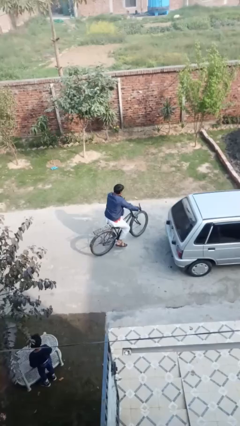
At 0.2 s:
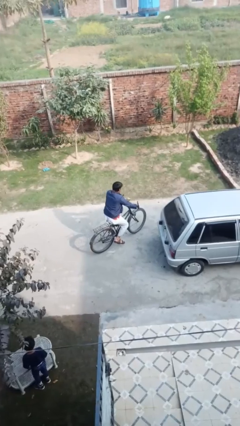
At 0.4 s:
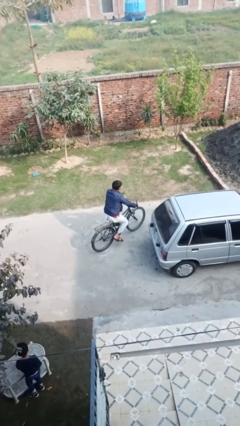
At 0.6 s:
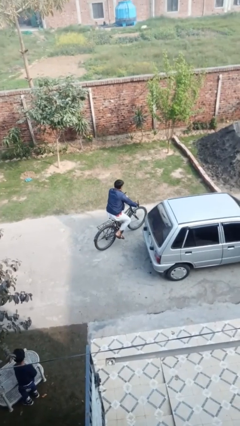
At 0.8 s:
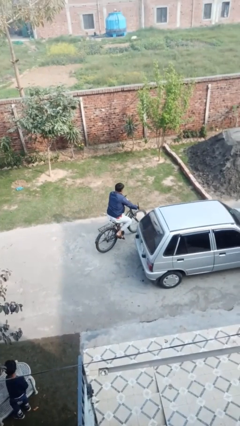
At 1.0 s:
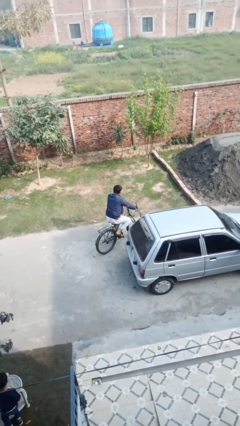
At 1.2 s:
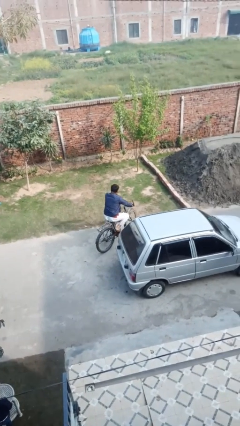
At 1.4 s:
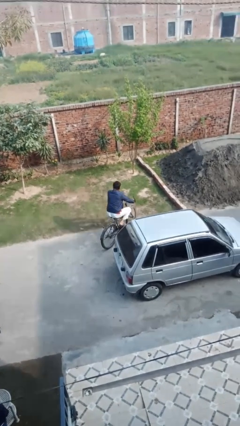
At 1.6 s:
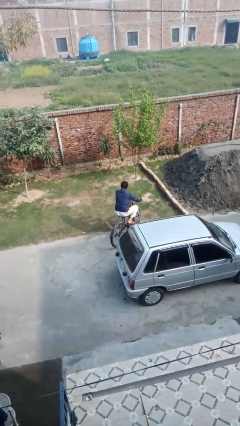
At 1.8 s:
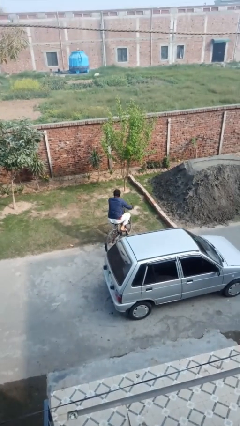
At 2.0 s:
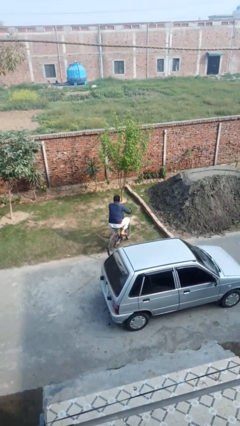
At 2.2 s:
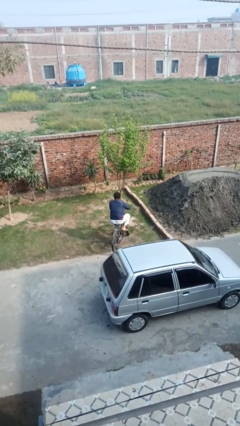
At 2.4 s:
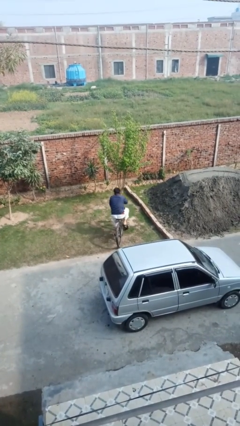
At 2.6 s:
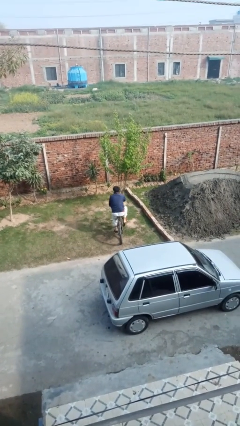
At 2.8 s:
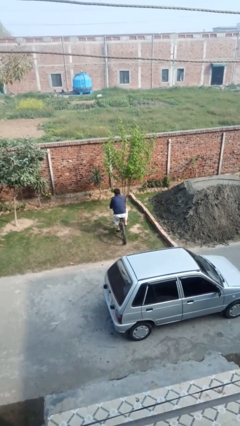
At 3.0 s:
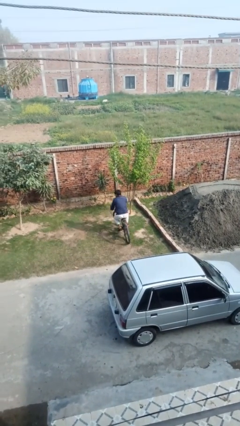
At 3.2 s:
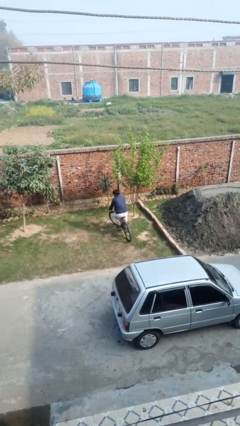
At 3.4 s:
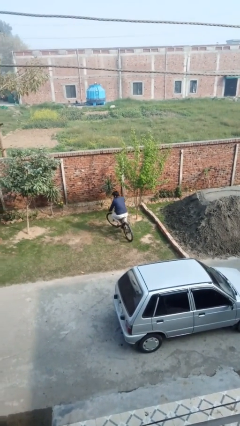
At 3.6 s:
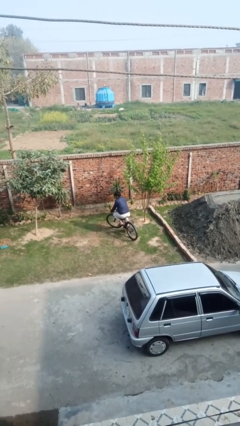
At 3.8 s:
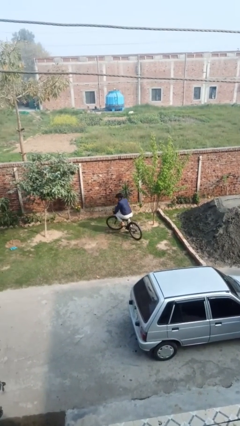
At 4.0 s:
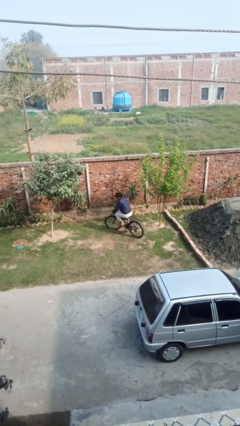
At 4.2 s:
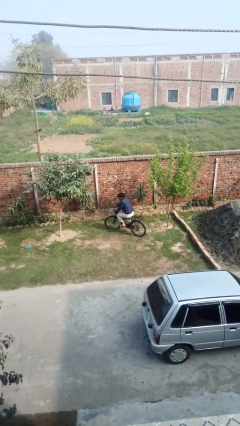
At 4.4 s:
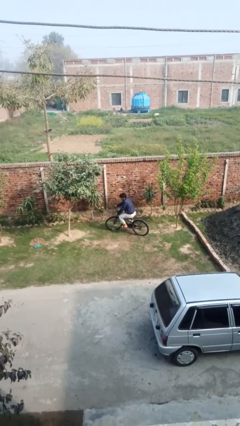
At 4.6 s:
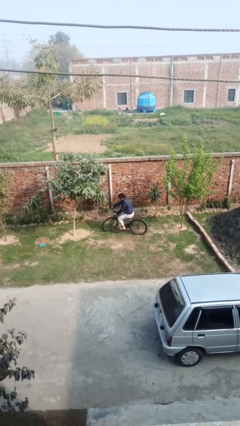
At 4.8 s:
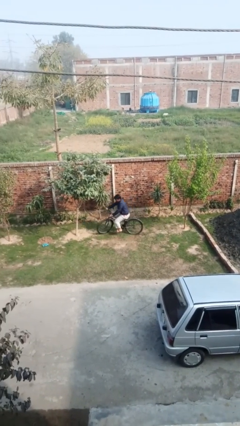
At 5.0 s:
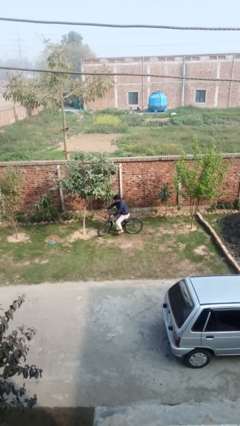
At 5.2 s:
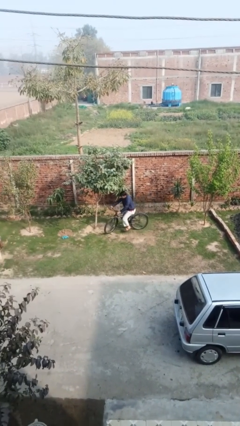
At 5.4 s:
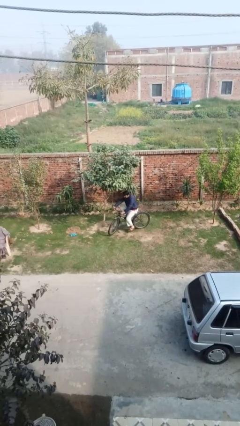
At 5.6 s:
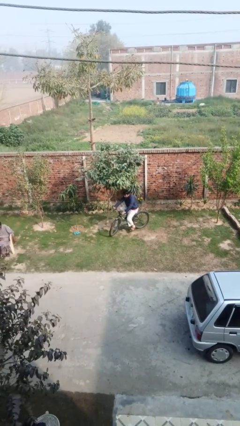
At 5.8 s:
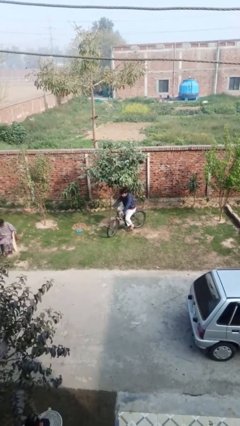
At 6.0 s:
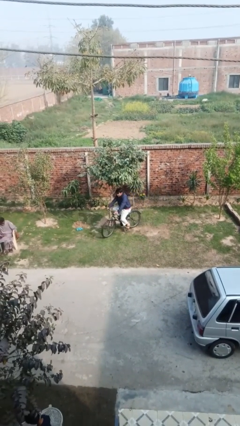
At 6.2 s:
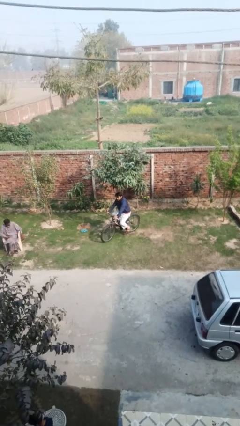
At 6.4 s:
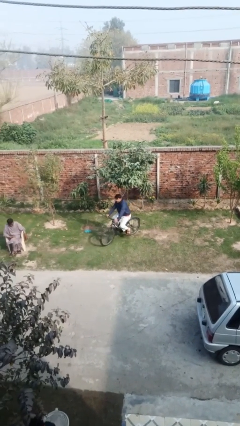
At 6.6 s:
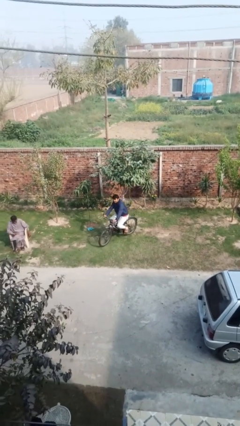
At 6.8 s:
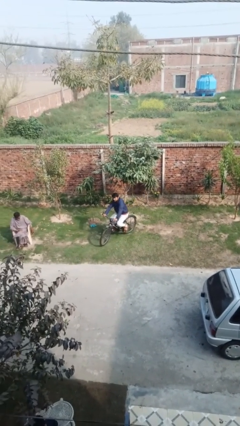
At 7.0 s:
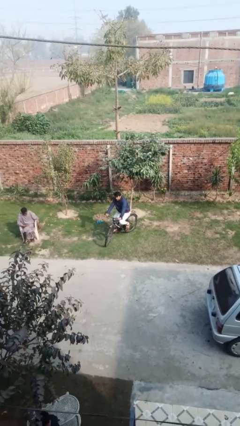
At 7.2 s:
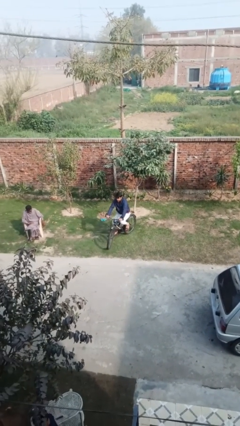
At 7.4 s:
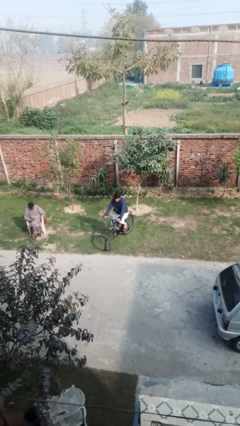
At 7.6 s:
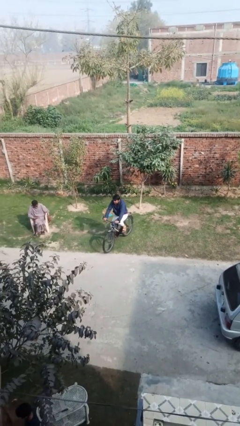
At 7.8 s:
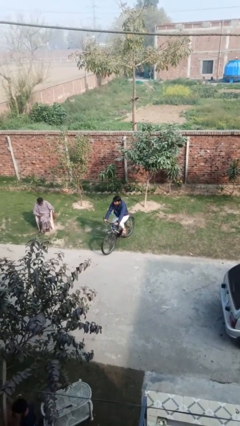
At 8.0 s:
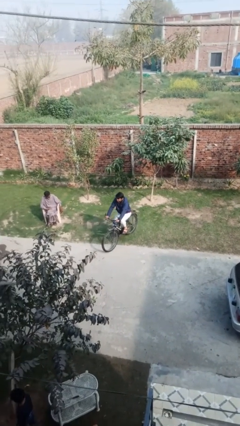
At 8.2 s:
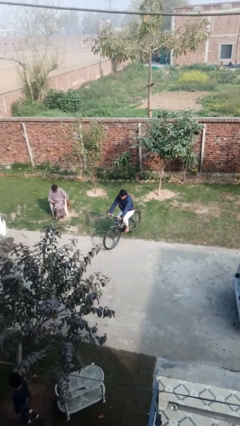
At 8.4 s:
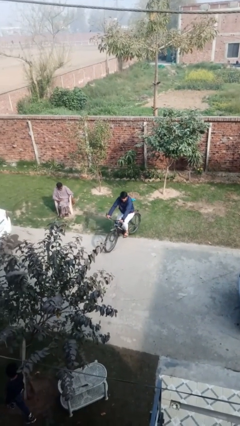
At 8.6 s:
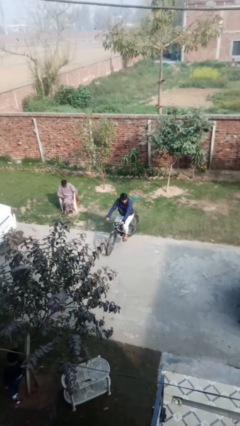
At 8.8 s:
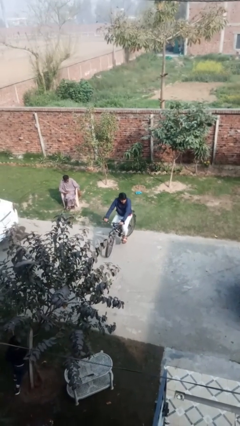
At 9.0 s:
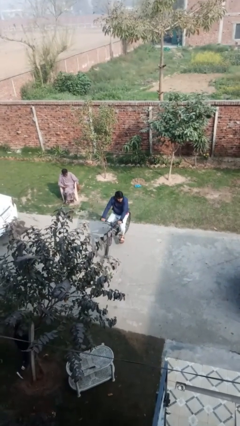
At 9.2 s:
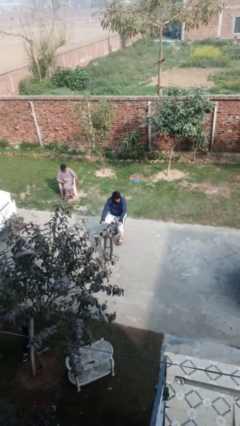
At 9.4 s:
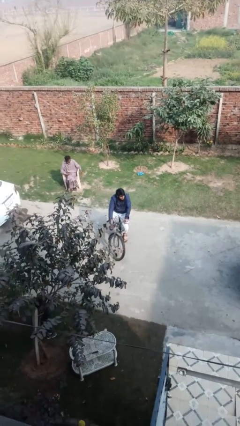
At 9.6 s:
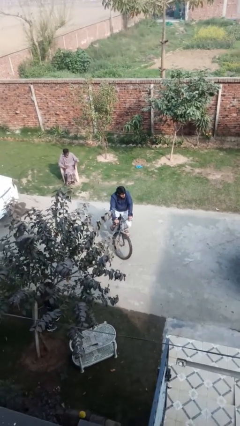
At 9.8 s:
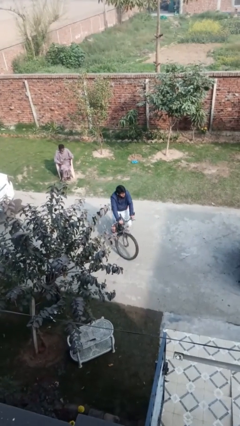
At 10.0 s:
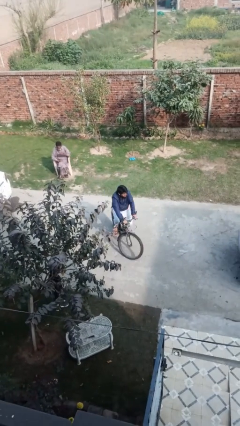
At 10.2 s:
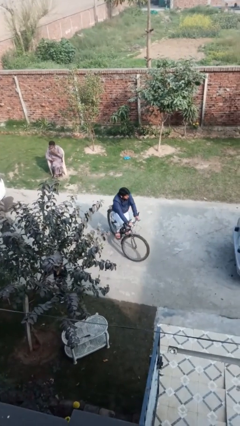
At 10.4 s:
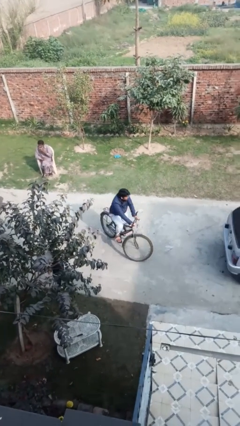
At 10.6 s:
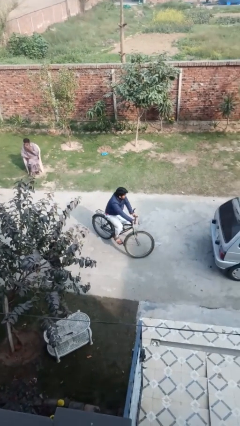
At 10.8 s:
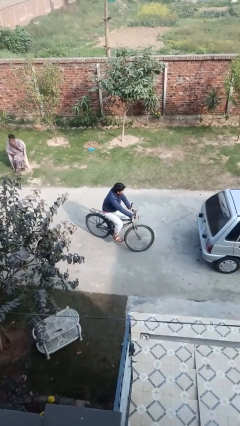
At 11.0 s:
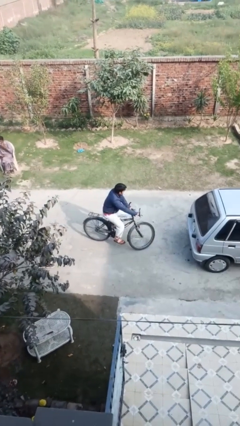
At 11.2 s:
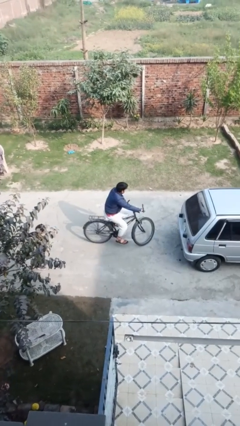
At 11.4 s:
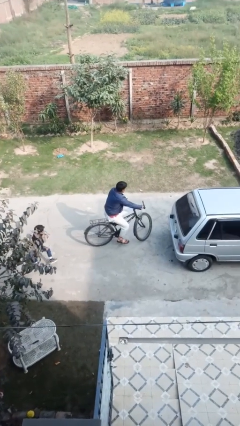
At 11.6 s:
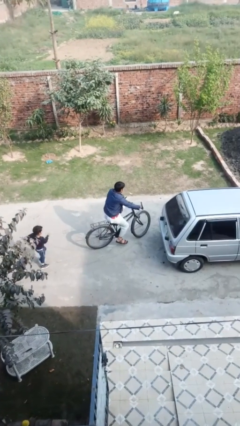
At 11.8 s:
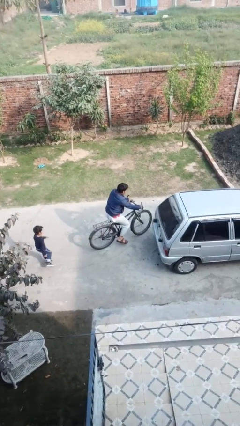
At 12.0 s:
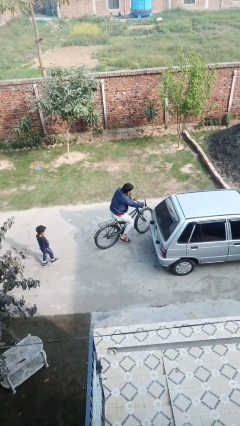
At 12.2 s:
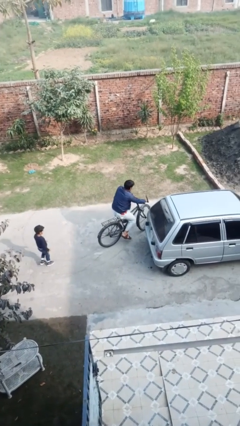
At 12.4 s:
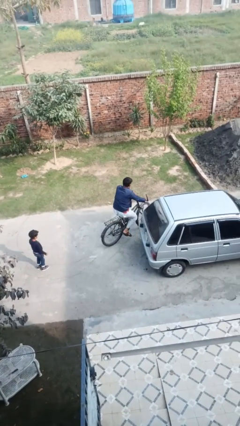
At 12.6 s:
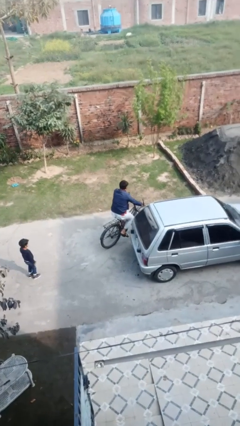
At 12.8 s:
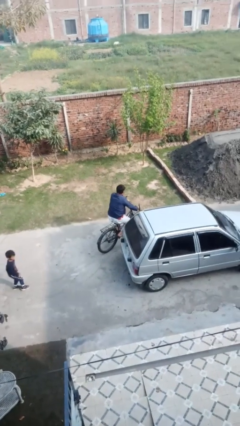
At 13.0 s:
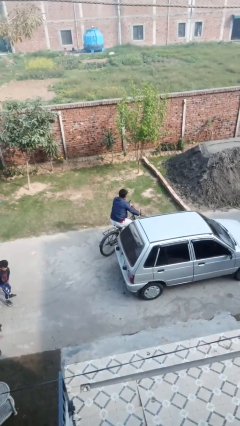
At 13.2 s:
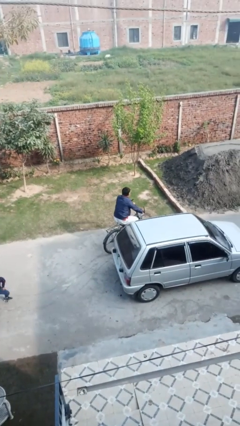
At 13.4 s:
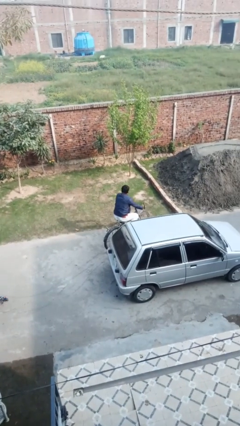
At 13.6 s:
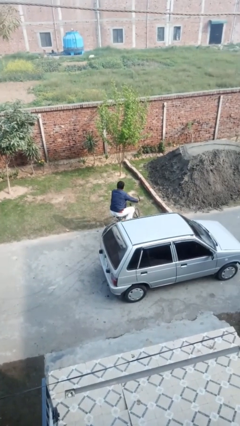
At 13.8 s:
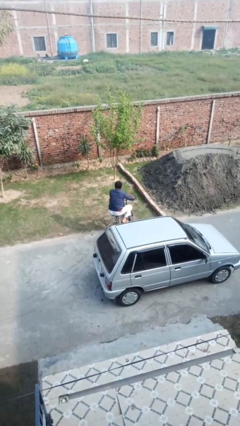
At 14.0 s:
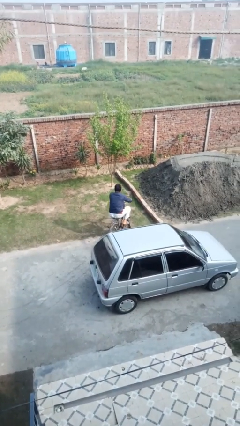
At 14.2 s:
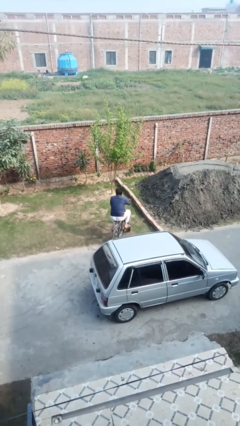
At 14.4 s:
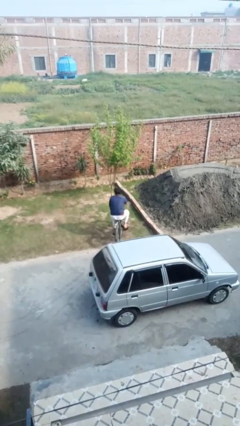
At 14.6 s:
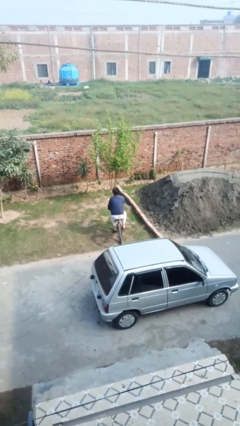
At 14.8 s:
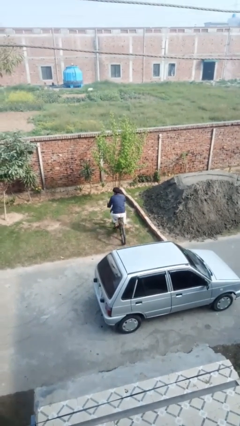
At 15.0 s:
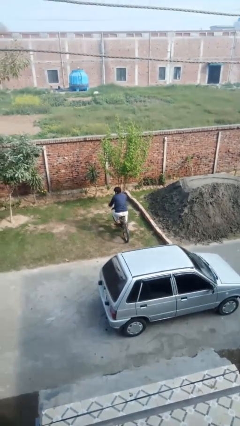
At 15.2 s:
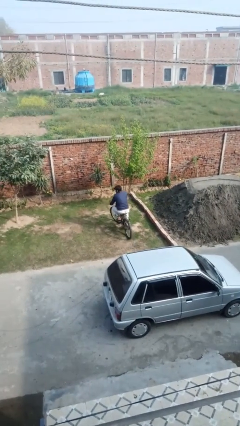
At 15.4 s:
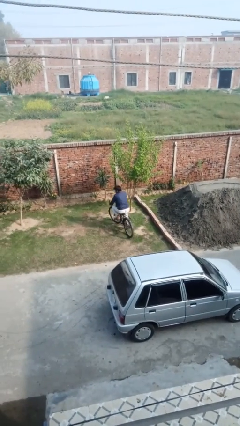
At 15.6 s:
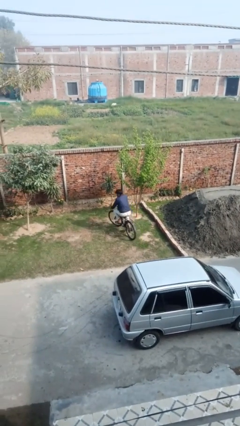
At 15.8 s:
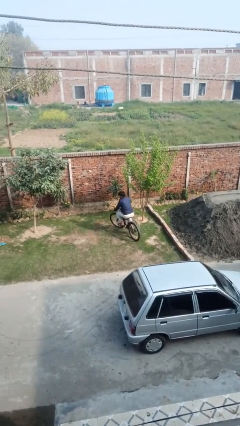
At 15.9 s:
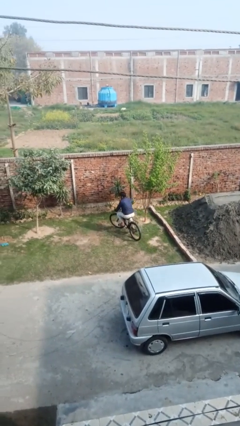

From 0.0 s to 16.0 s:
person rides bicycle

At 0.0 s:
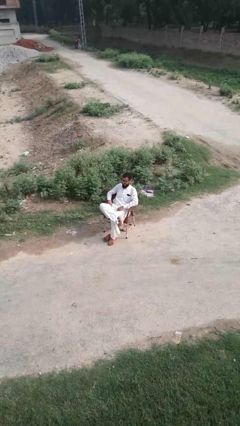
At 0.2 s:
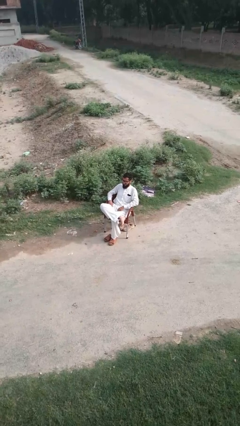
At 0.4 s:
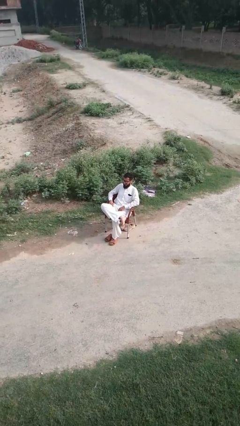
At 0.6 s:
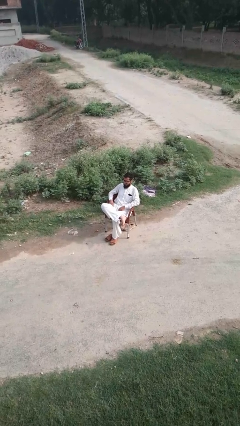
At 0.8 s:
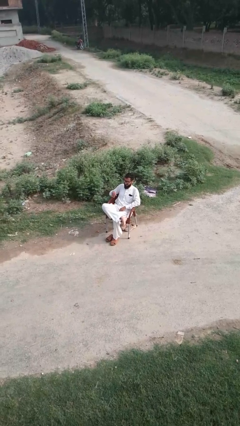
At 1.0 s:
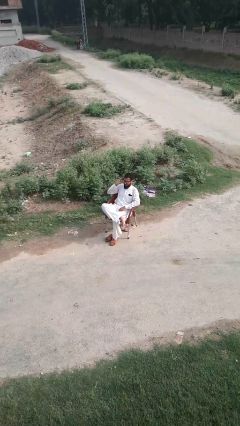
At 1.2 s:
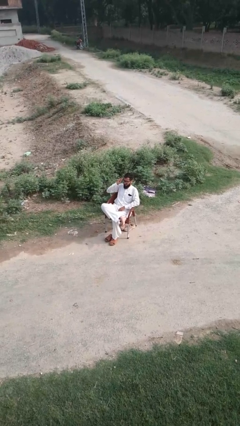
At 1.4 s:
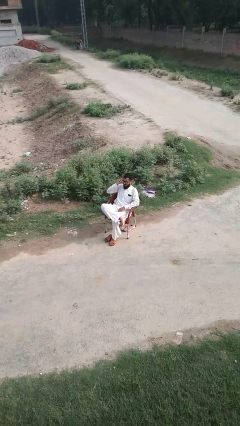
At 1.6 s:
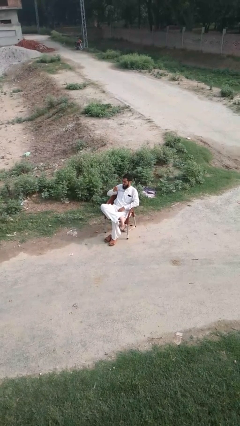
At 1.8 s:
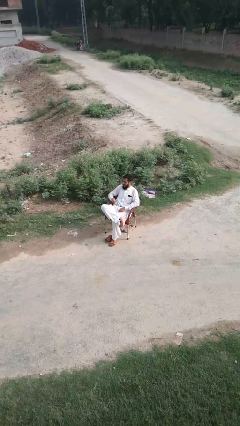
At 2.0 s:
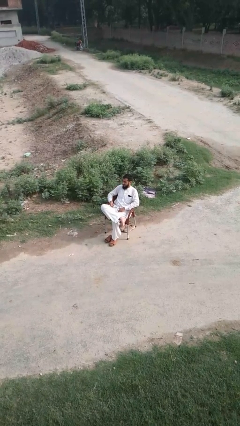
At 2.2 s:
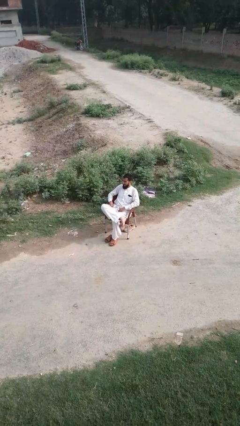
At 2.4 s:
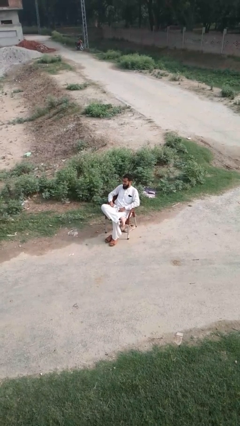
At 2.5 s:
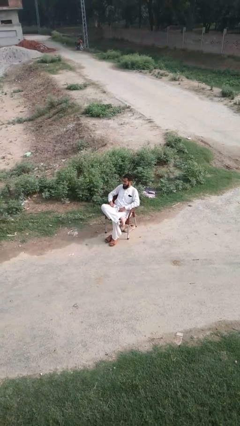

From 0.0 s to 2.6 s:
person takes off glasses
